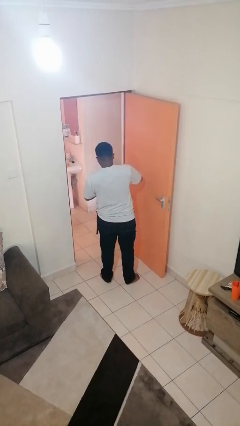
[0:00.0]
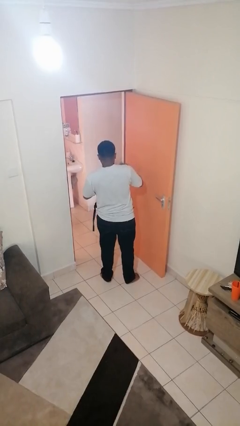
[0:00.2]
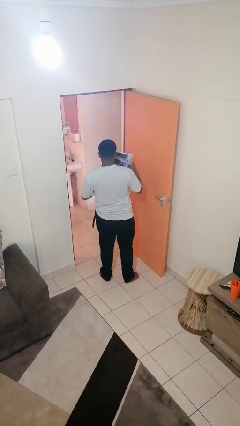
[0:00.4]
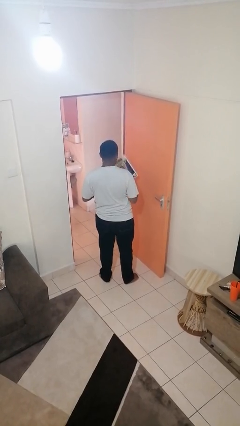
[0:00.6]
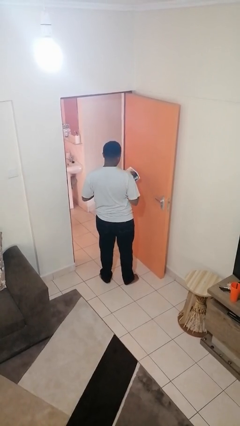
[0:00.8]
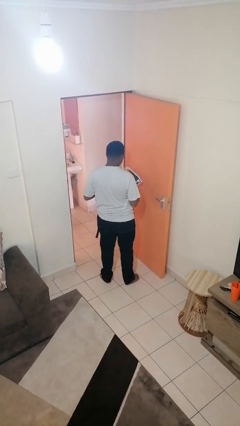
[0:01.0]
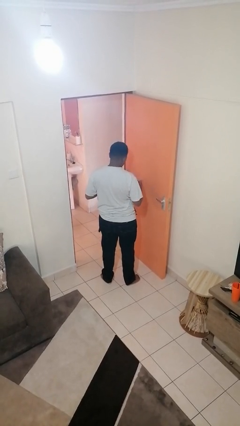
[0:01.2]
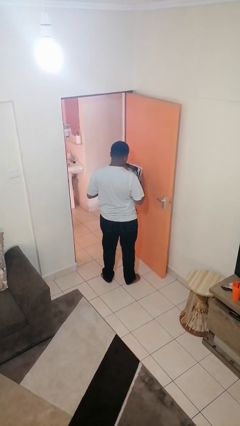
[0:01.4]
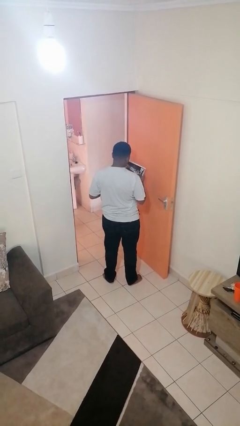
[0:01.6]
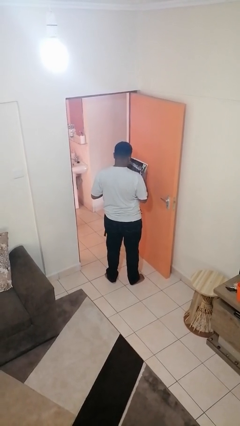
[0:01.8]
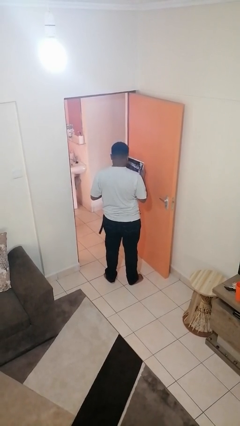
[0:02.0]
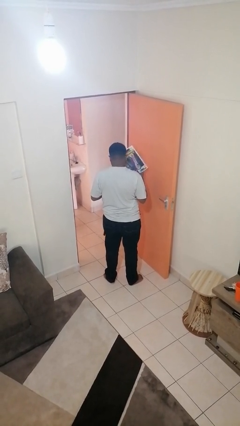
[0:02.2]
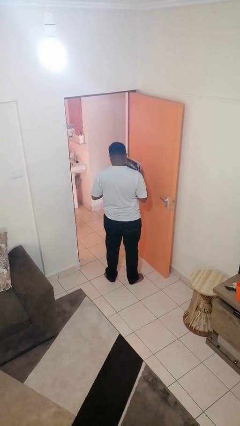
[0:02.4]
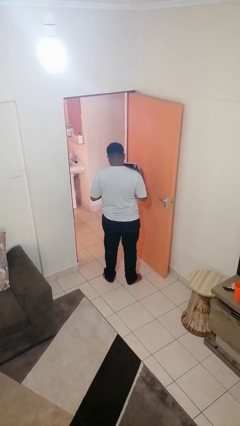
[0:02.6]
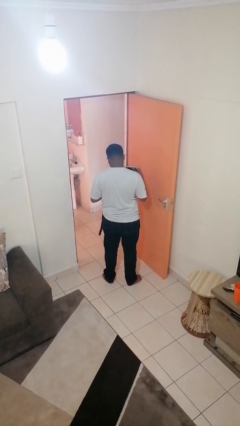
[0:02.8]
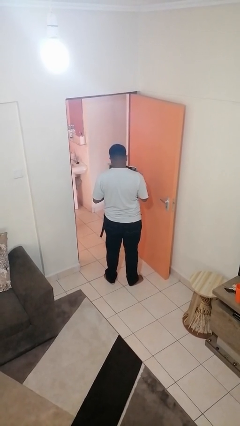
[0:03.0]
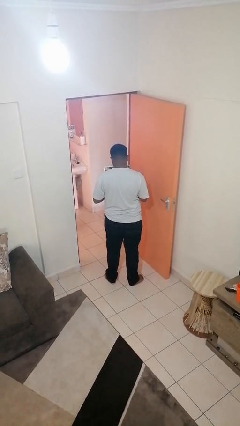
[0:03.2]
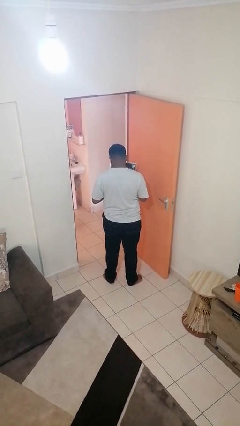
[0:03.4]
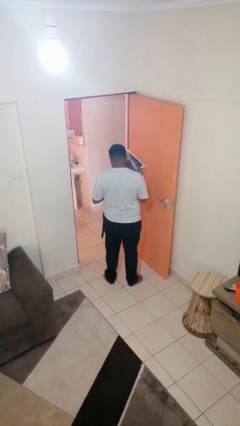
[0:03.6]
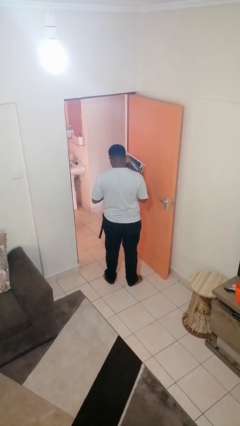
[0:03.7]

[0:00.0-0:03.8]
person takes object from backpack

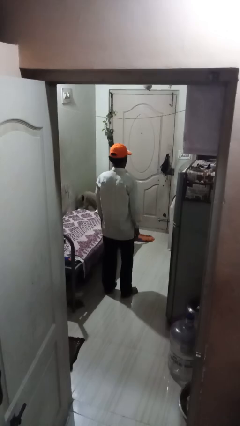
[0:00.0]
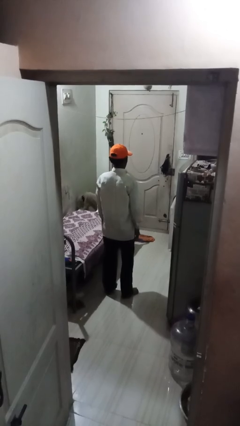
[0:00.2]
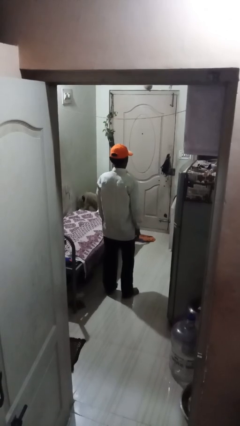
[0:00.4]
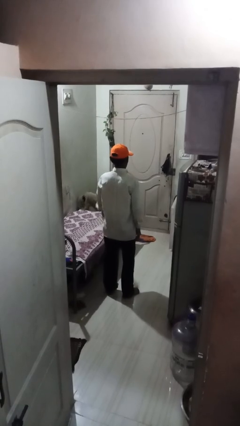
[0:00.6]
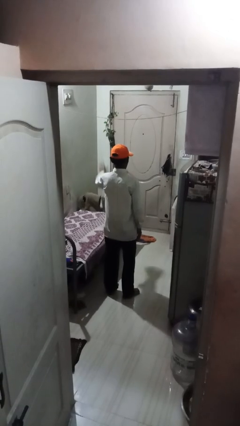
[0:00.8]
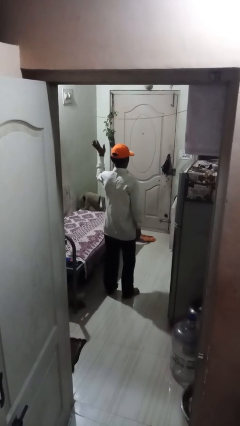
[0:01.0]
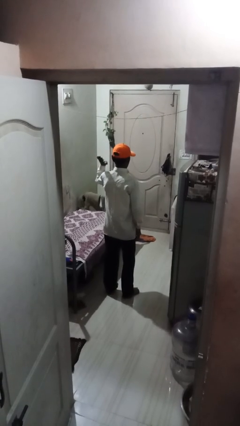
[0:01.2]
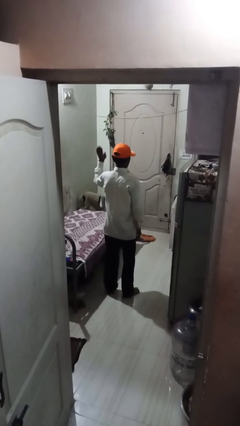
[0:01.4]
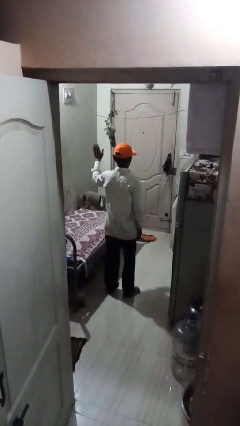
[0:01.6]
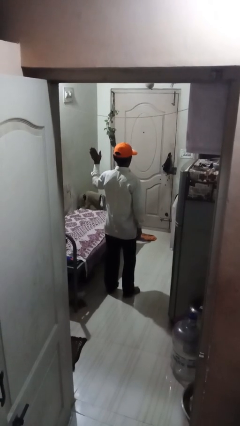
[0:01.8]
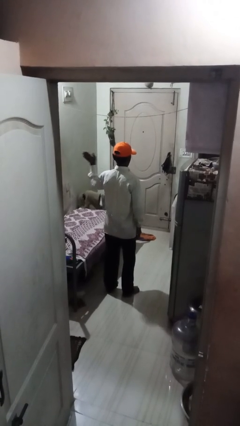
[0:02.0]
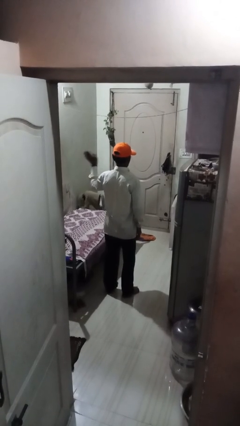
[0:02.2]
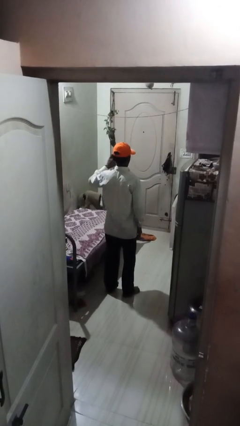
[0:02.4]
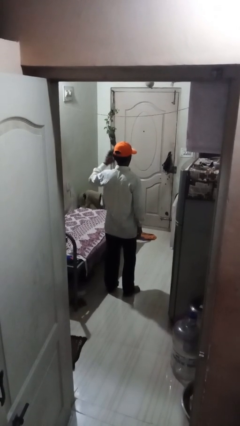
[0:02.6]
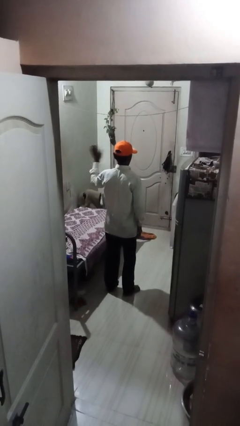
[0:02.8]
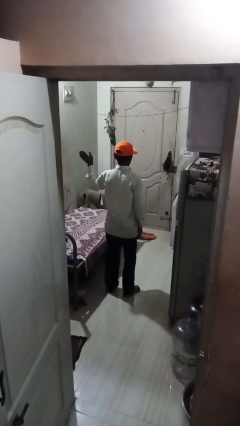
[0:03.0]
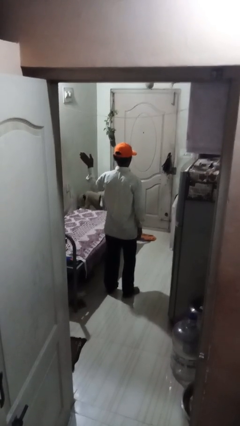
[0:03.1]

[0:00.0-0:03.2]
person waves at person

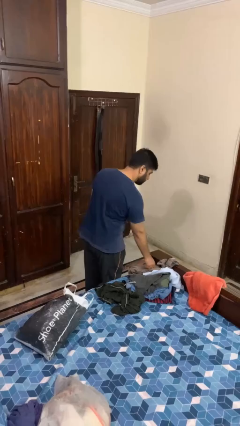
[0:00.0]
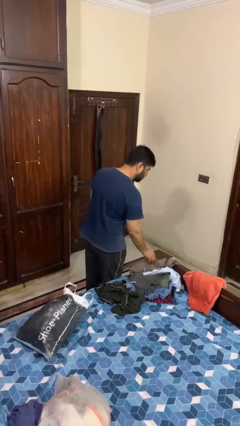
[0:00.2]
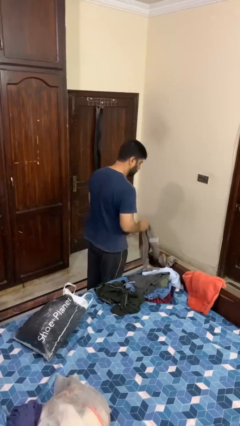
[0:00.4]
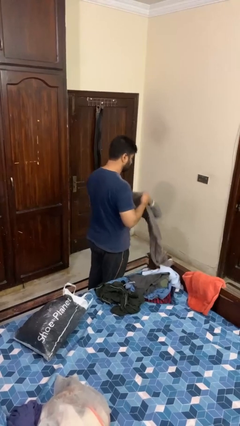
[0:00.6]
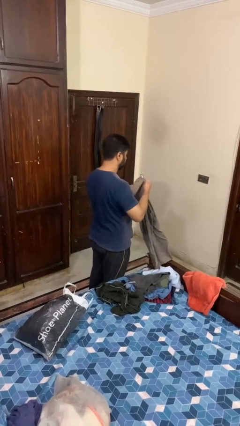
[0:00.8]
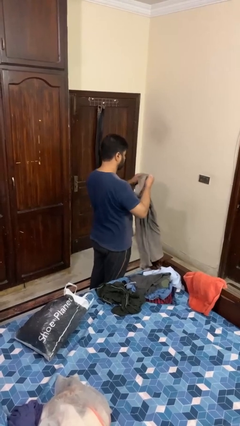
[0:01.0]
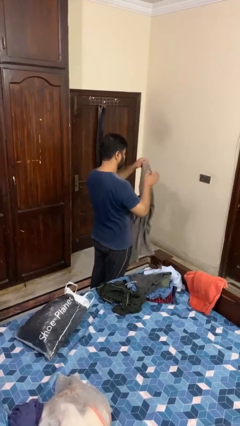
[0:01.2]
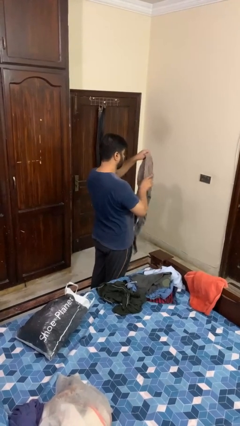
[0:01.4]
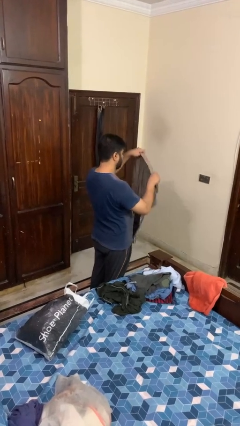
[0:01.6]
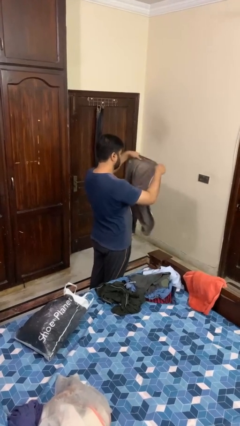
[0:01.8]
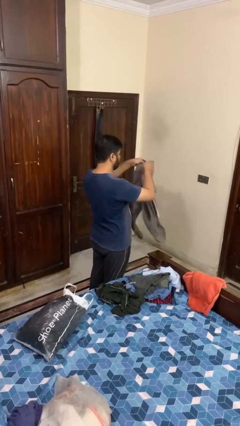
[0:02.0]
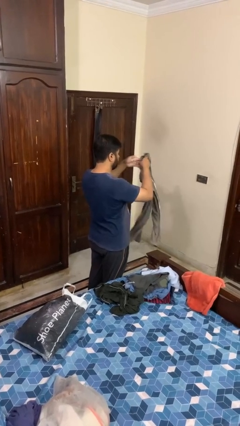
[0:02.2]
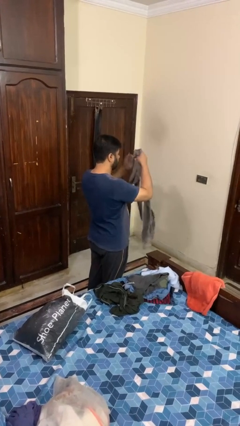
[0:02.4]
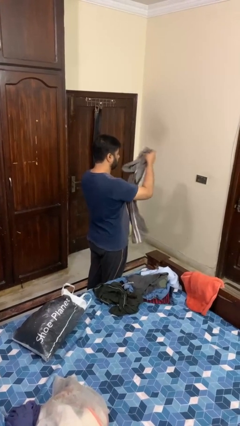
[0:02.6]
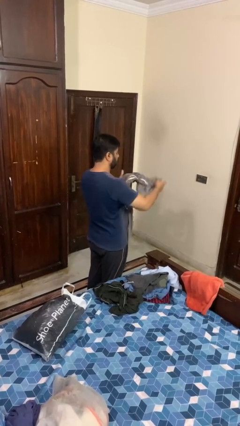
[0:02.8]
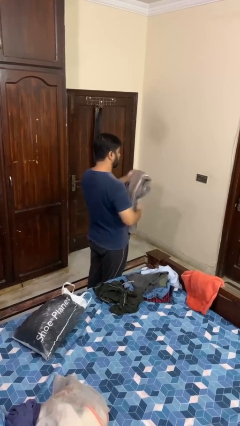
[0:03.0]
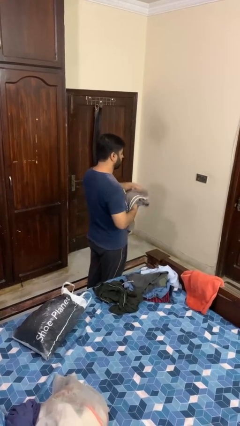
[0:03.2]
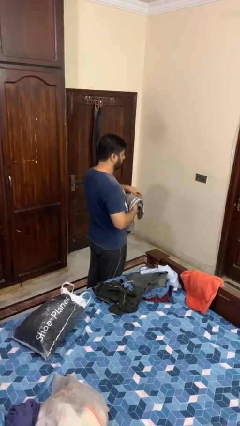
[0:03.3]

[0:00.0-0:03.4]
person folds pants

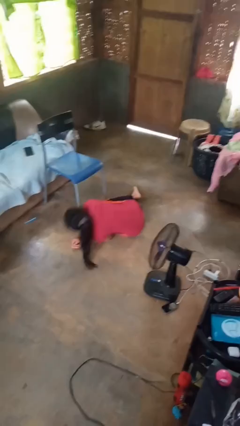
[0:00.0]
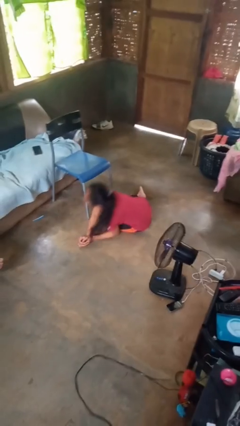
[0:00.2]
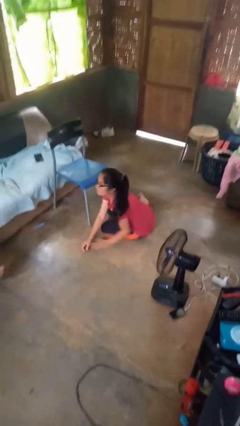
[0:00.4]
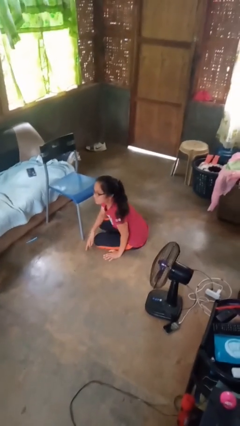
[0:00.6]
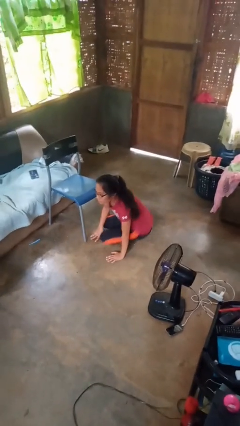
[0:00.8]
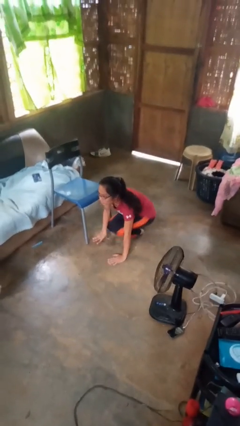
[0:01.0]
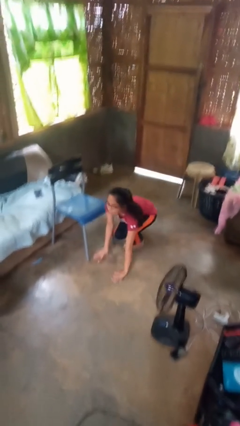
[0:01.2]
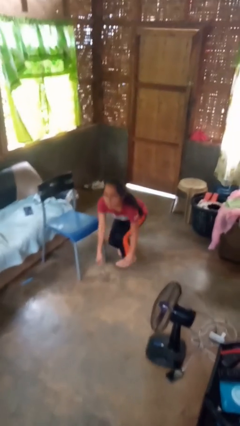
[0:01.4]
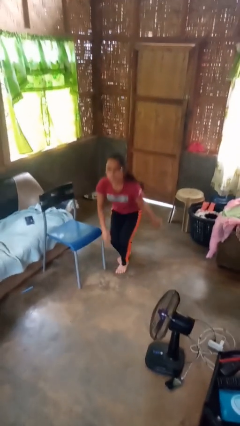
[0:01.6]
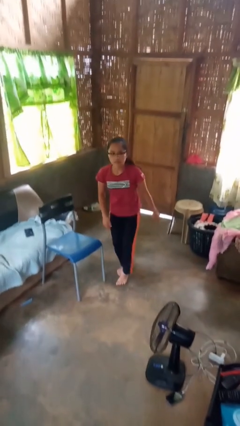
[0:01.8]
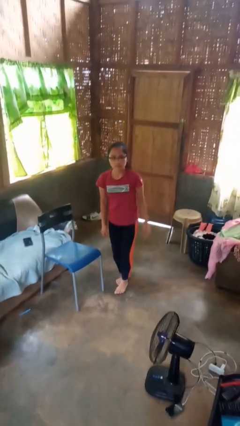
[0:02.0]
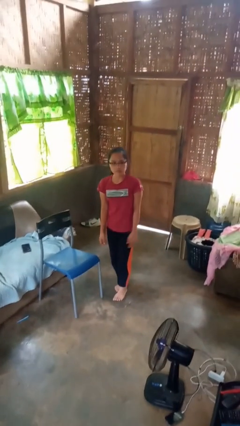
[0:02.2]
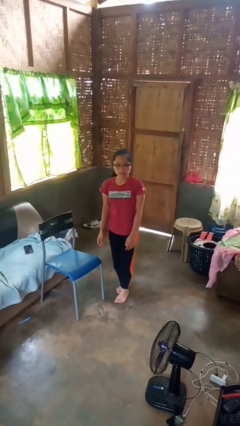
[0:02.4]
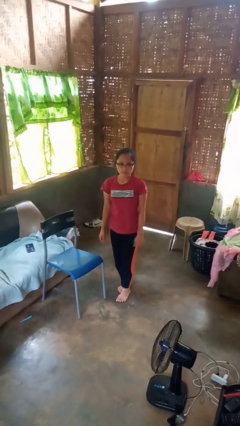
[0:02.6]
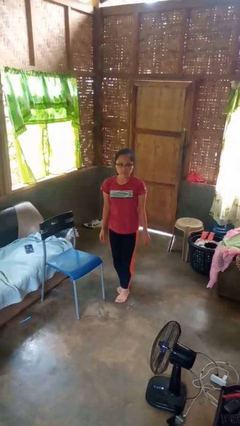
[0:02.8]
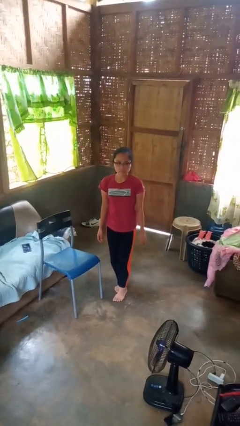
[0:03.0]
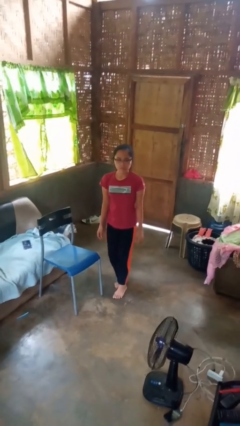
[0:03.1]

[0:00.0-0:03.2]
person stands up from floor

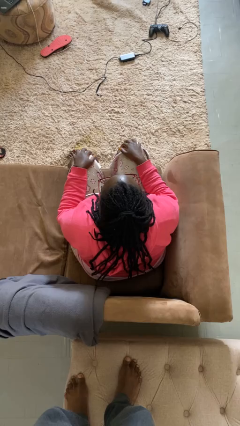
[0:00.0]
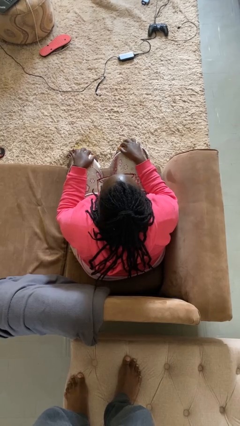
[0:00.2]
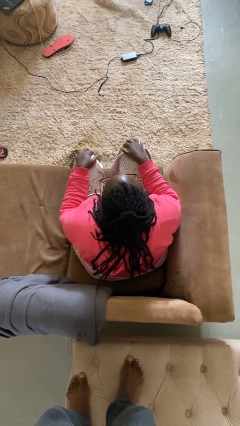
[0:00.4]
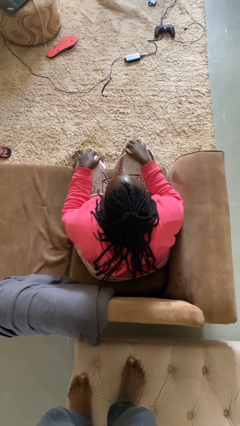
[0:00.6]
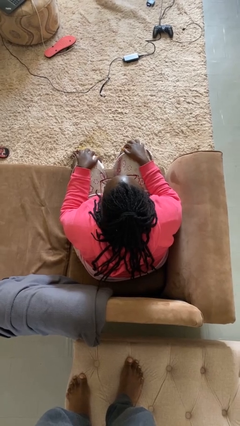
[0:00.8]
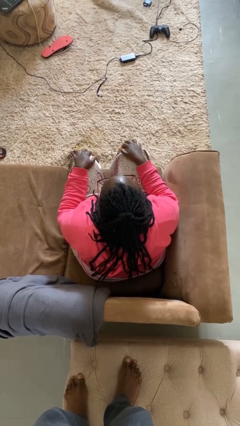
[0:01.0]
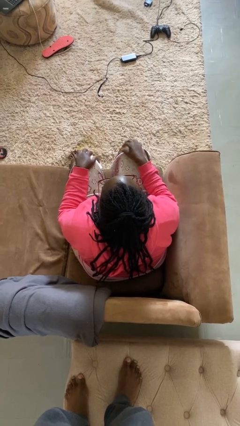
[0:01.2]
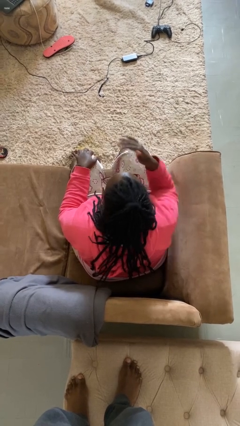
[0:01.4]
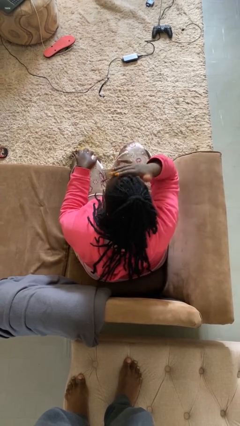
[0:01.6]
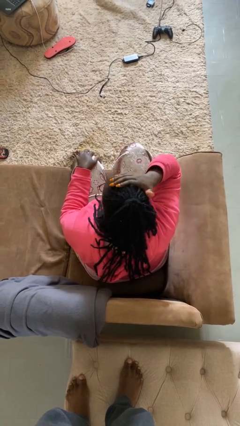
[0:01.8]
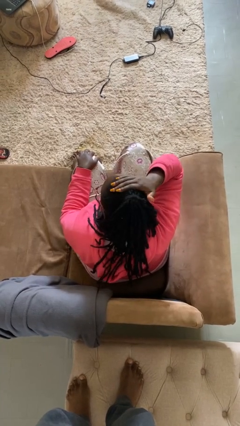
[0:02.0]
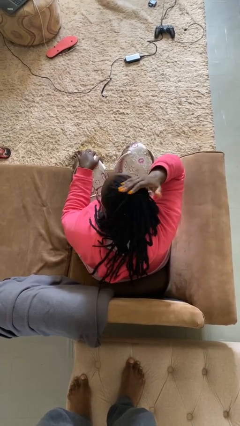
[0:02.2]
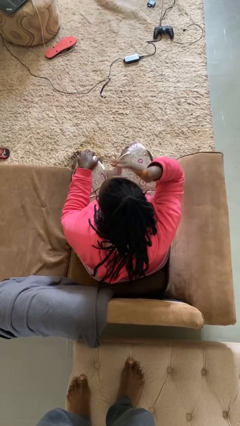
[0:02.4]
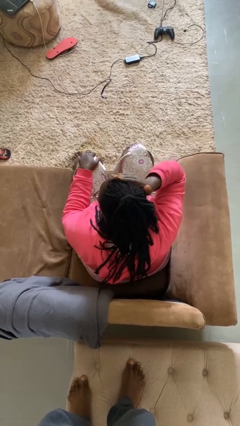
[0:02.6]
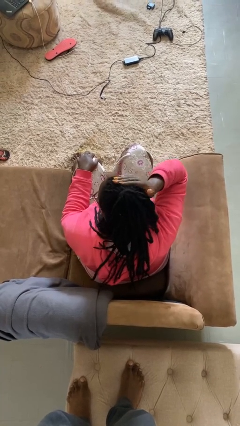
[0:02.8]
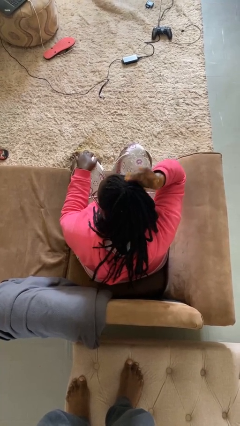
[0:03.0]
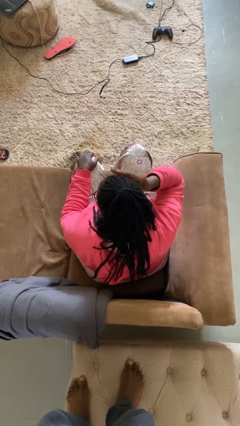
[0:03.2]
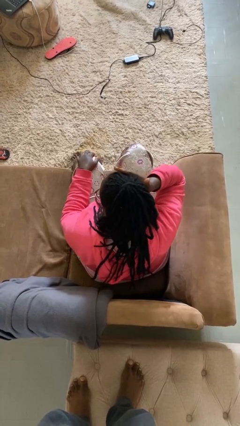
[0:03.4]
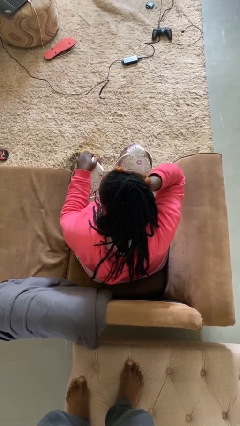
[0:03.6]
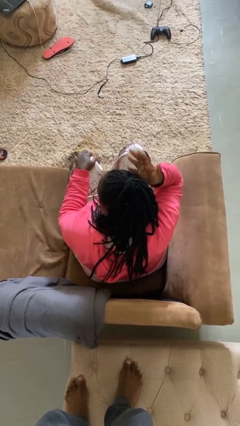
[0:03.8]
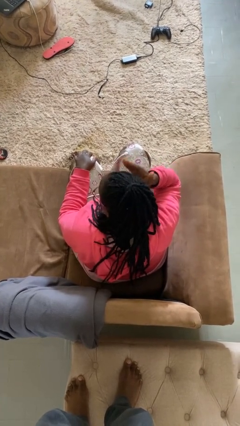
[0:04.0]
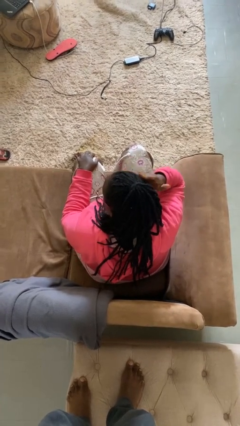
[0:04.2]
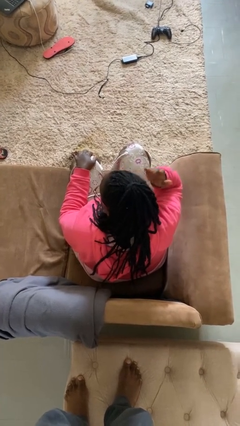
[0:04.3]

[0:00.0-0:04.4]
person strokes hair
